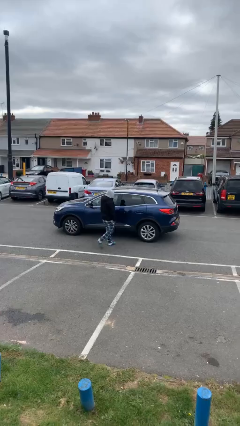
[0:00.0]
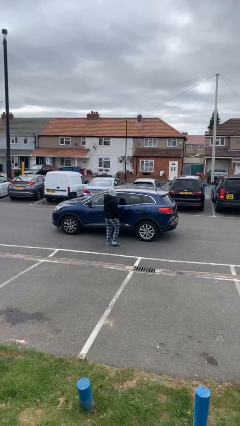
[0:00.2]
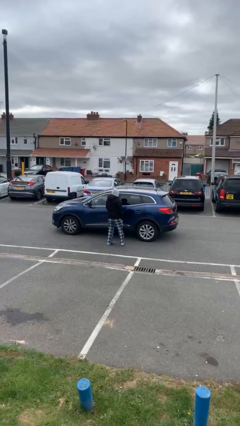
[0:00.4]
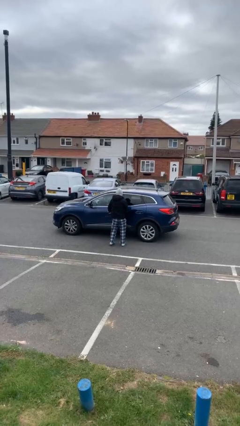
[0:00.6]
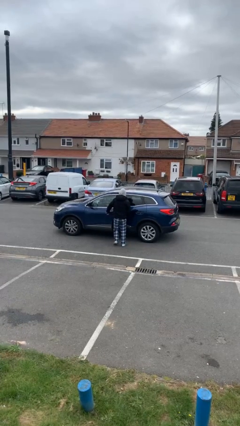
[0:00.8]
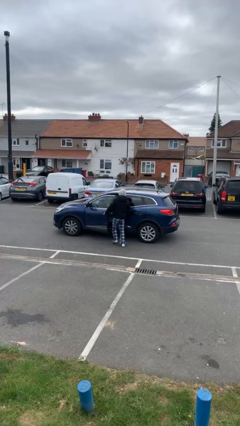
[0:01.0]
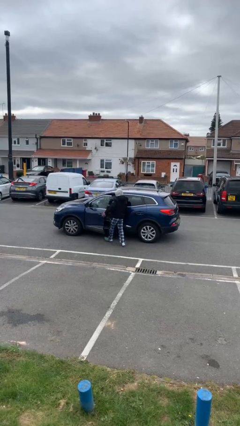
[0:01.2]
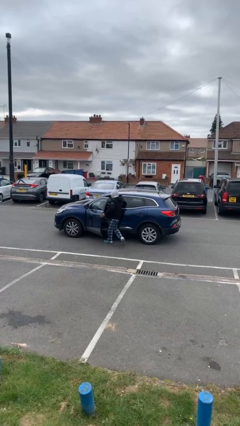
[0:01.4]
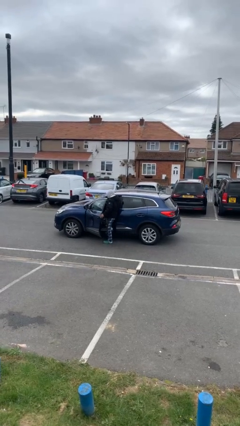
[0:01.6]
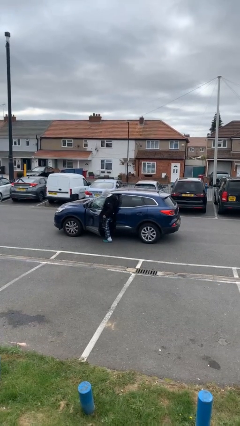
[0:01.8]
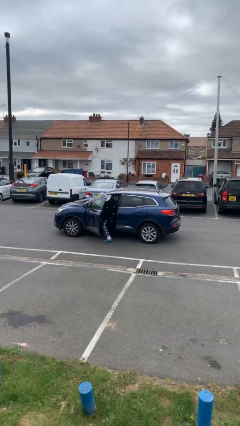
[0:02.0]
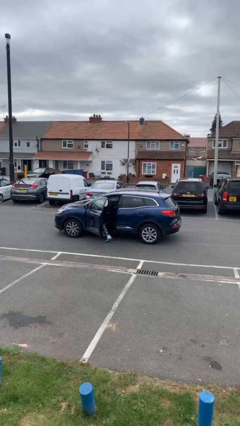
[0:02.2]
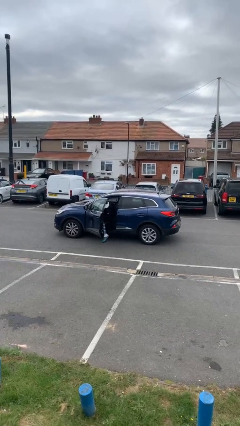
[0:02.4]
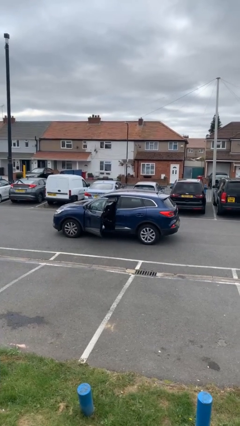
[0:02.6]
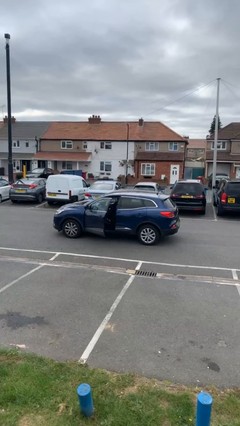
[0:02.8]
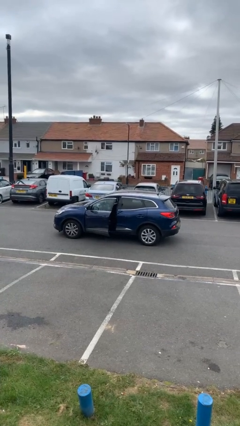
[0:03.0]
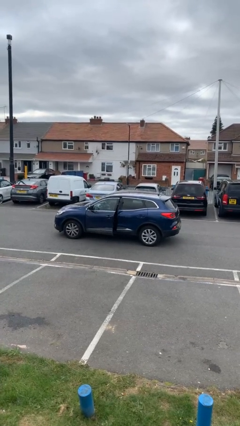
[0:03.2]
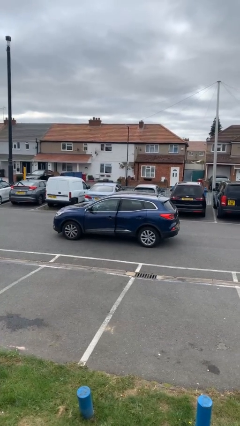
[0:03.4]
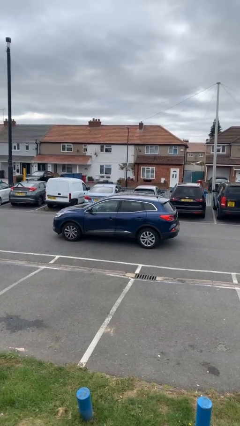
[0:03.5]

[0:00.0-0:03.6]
car picks up person

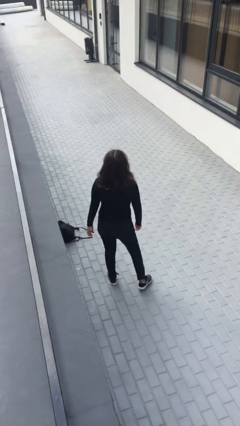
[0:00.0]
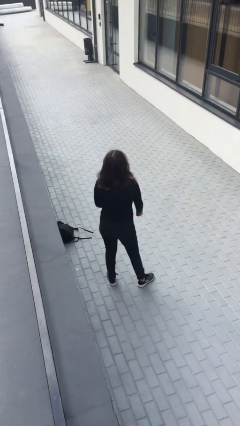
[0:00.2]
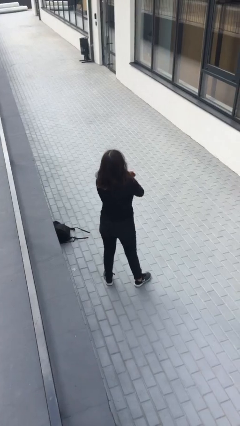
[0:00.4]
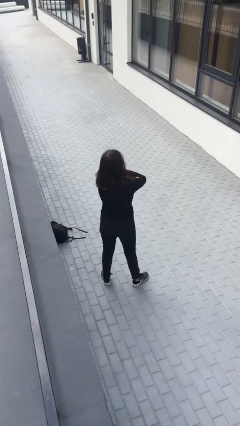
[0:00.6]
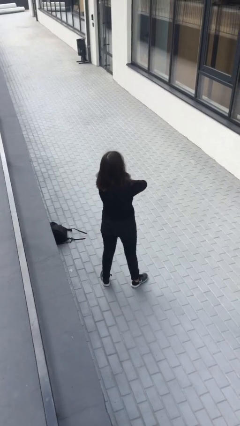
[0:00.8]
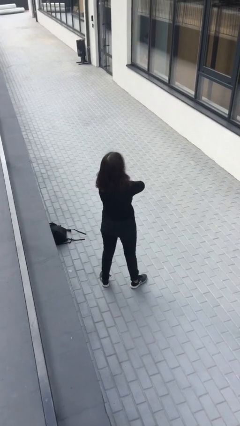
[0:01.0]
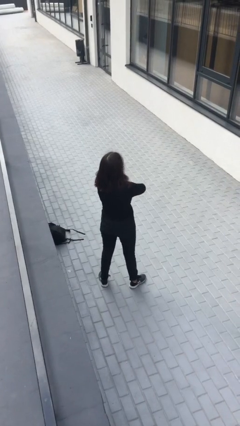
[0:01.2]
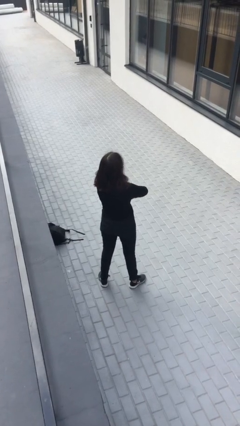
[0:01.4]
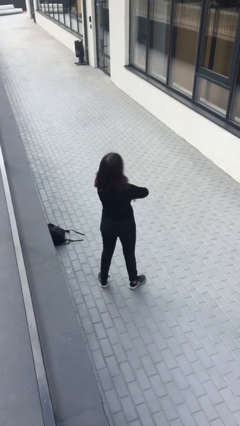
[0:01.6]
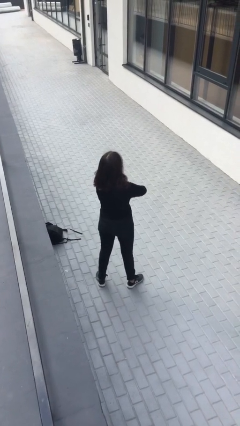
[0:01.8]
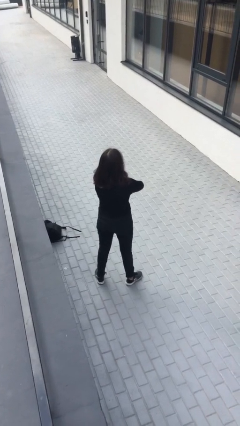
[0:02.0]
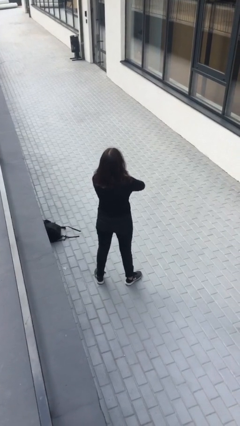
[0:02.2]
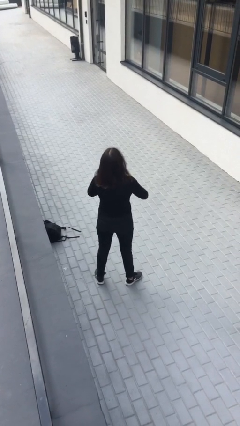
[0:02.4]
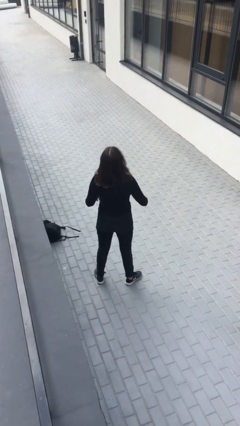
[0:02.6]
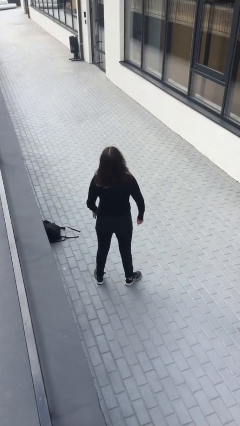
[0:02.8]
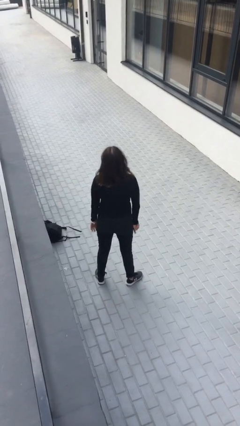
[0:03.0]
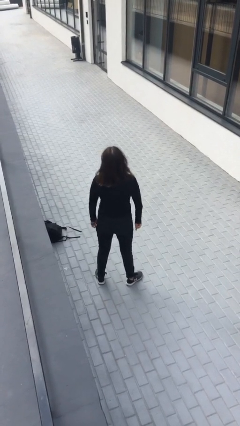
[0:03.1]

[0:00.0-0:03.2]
person crosses arms

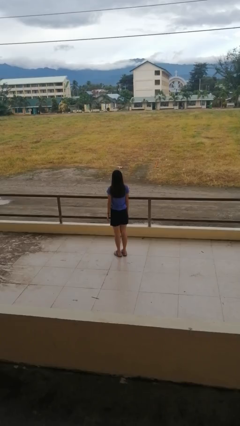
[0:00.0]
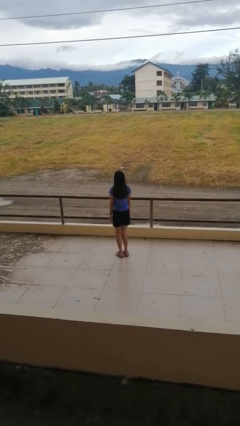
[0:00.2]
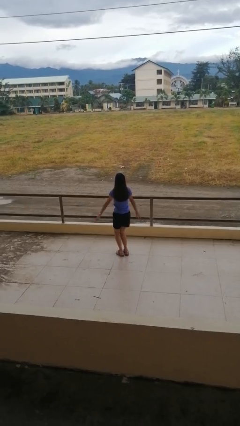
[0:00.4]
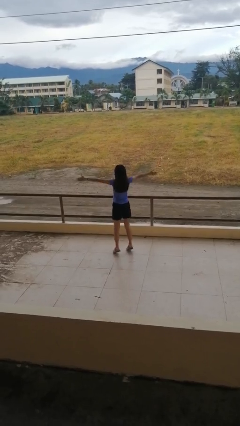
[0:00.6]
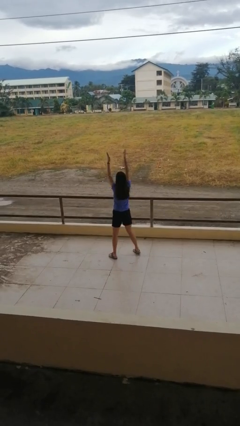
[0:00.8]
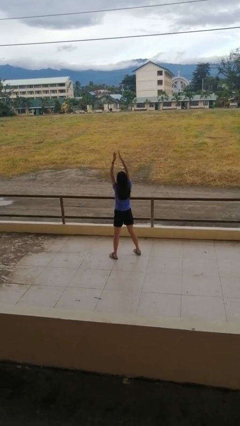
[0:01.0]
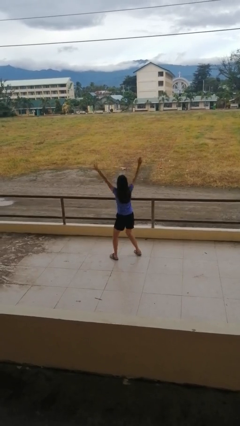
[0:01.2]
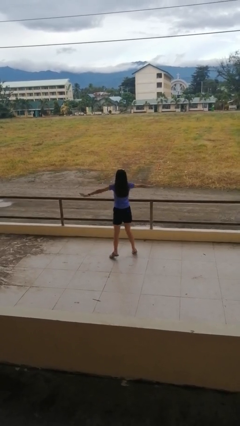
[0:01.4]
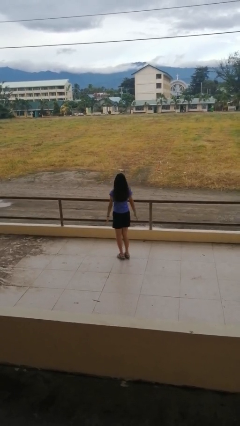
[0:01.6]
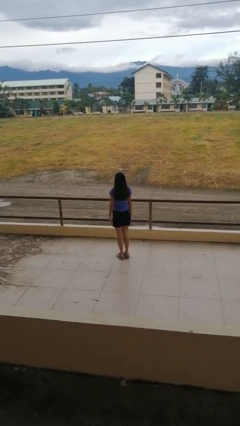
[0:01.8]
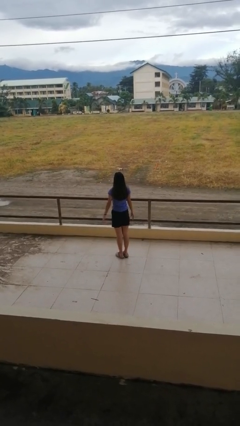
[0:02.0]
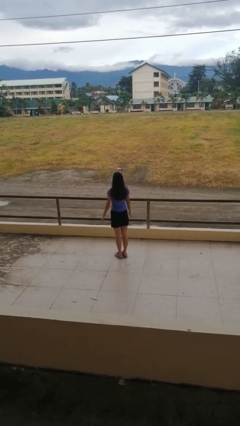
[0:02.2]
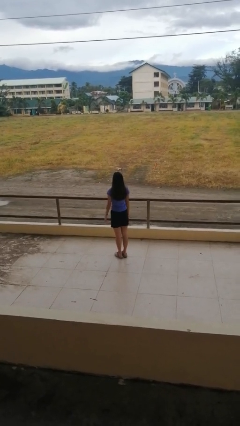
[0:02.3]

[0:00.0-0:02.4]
person exercises with jumping jacks

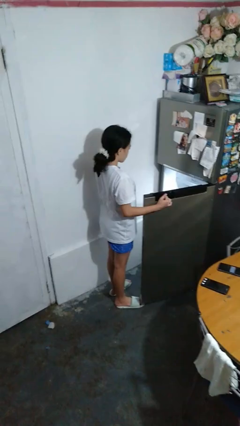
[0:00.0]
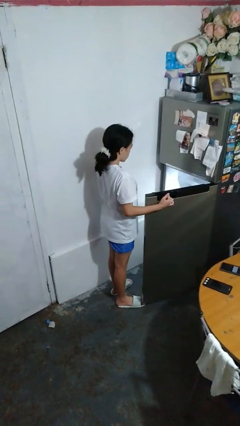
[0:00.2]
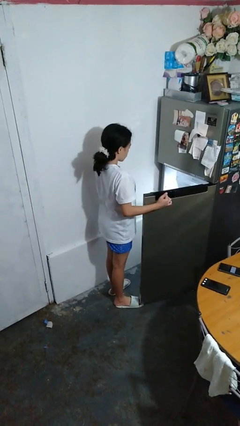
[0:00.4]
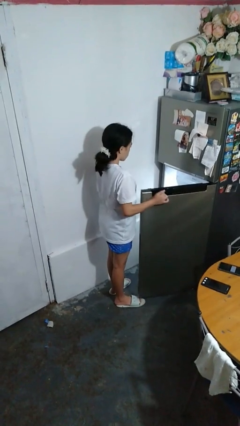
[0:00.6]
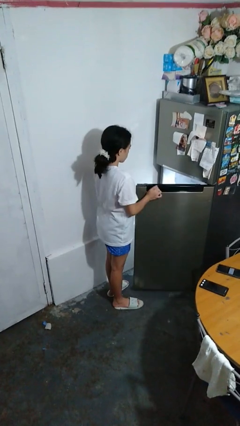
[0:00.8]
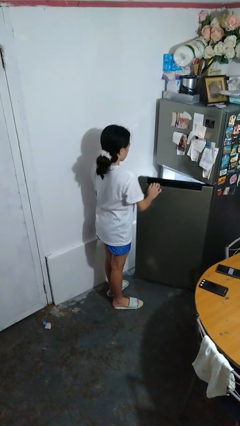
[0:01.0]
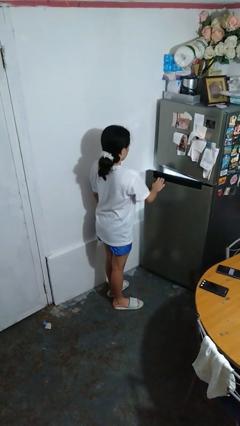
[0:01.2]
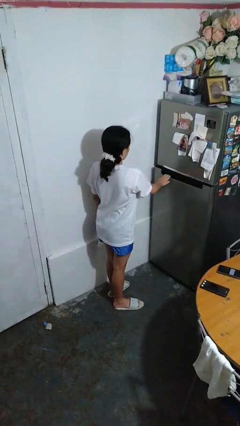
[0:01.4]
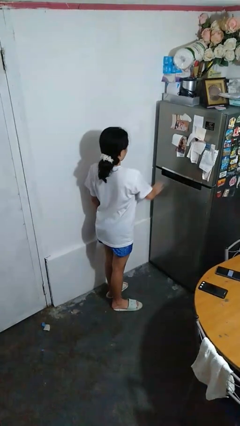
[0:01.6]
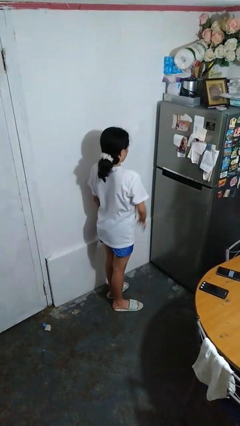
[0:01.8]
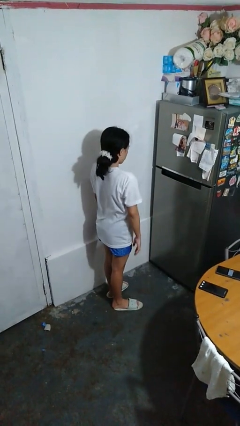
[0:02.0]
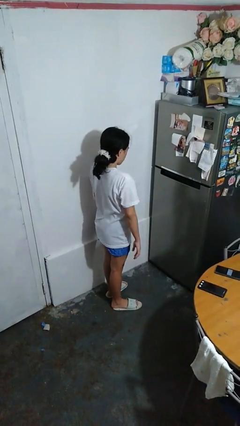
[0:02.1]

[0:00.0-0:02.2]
person closes refrigerator

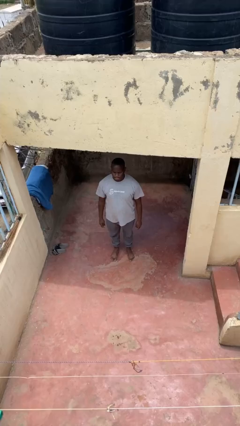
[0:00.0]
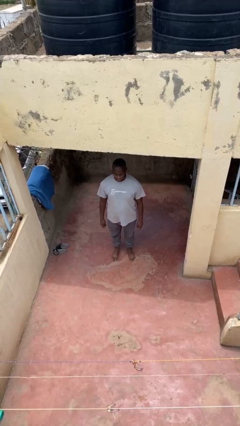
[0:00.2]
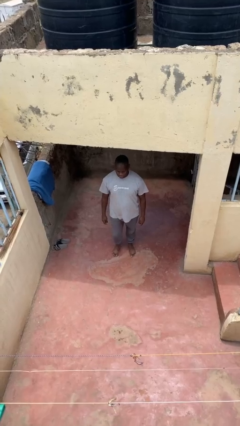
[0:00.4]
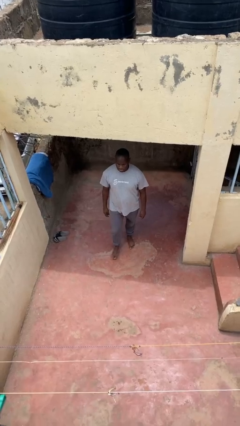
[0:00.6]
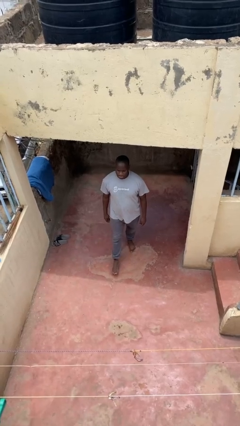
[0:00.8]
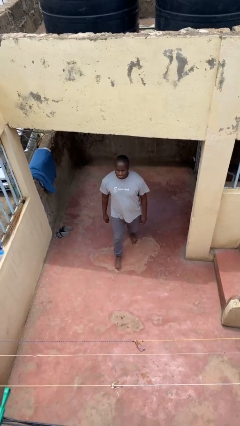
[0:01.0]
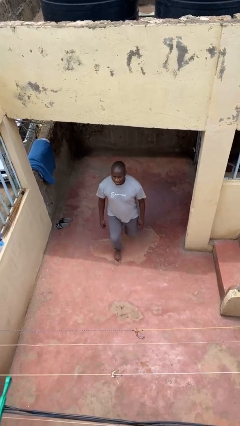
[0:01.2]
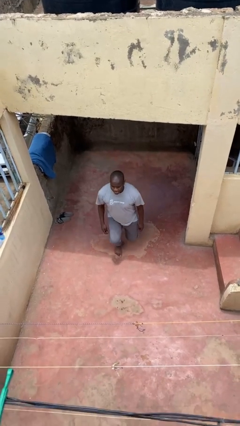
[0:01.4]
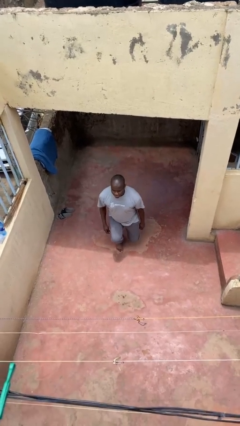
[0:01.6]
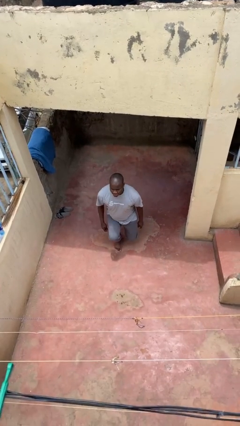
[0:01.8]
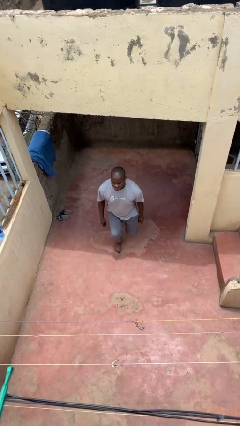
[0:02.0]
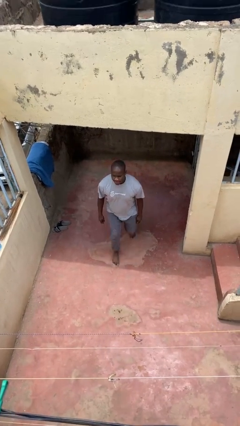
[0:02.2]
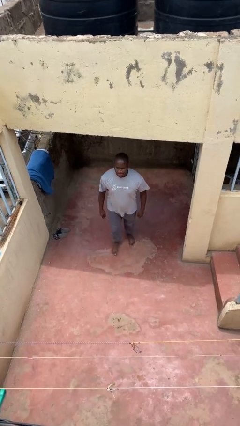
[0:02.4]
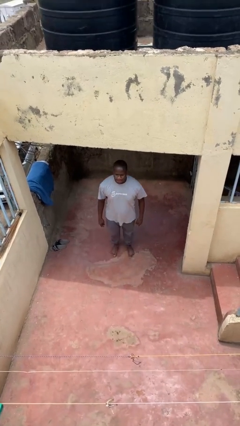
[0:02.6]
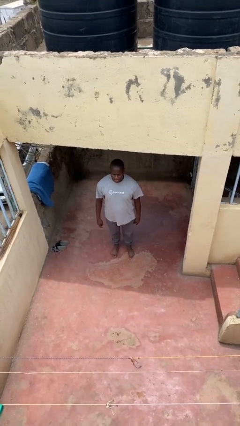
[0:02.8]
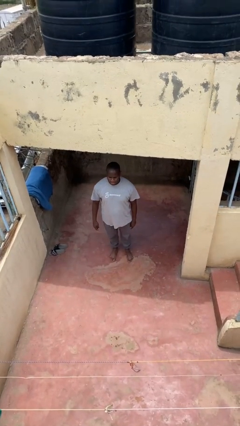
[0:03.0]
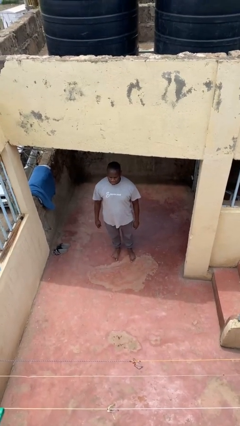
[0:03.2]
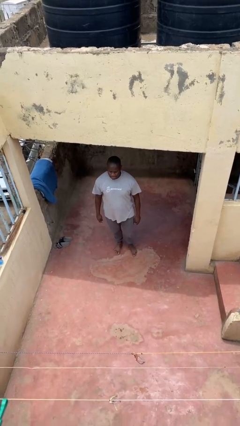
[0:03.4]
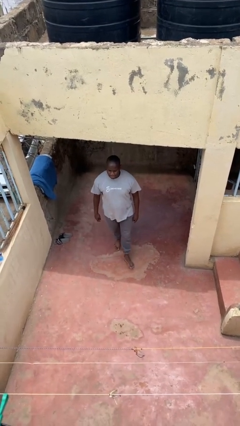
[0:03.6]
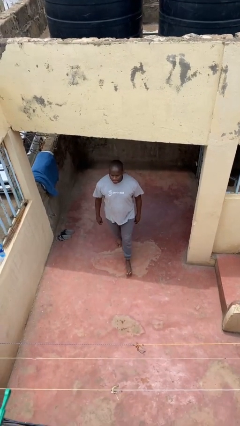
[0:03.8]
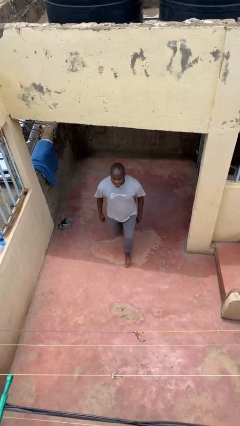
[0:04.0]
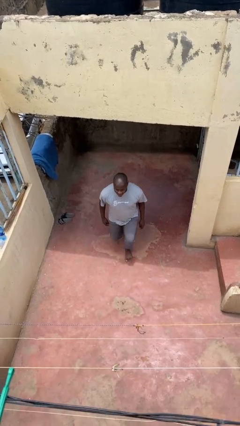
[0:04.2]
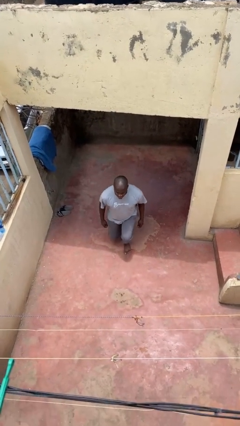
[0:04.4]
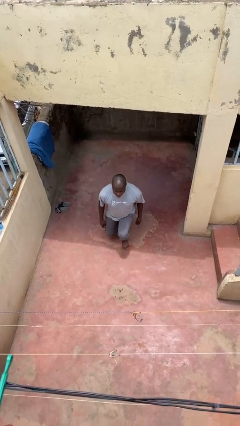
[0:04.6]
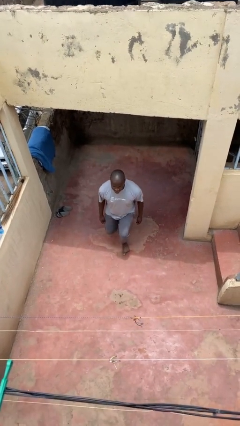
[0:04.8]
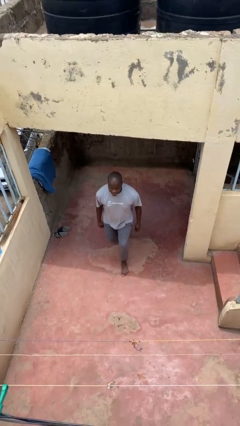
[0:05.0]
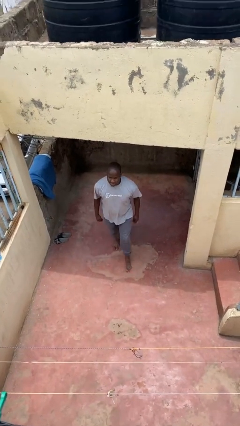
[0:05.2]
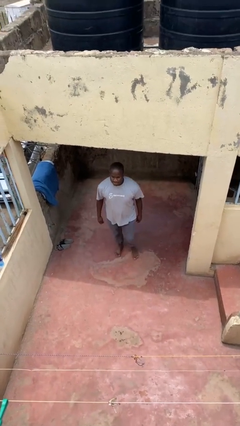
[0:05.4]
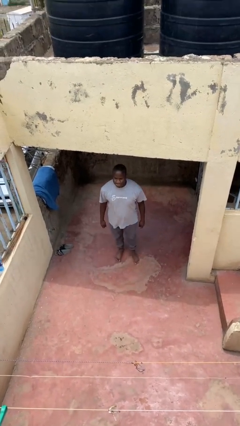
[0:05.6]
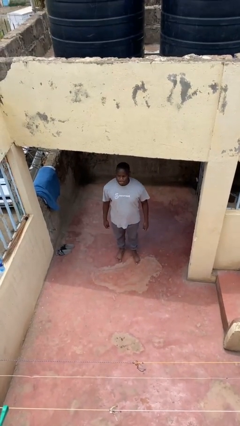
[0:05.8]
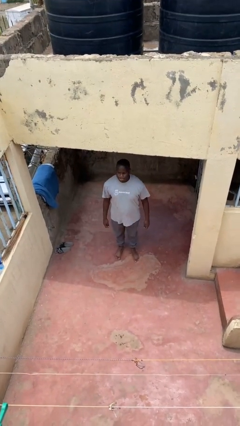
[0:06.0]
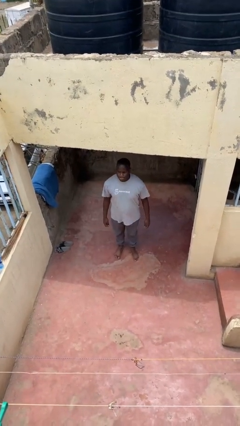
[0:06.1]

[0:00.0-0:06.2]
person exercises with lunges

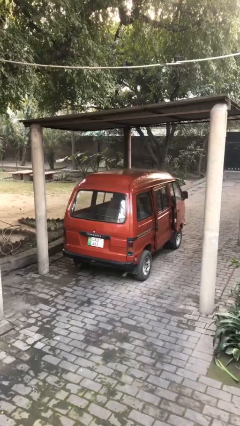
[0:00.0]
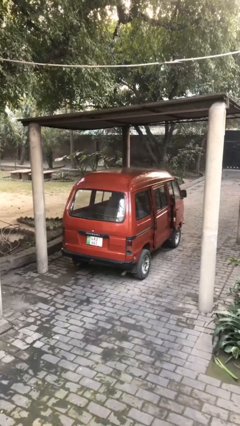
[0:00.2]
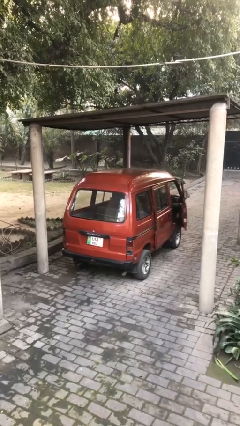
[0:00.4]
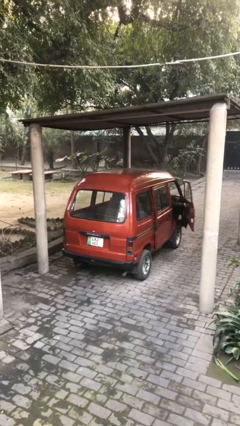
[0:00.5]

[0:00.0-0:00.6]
car drops off person
